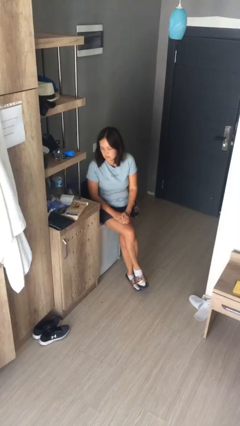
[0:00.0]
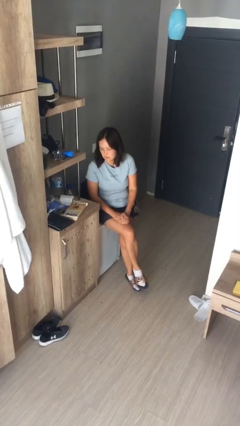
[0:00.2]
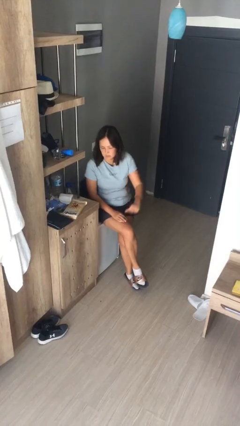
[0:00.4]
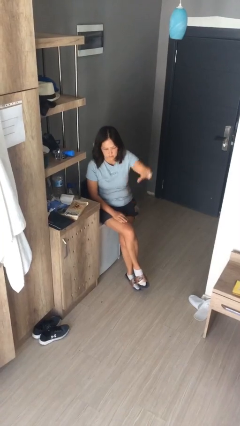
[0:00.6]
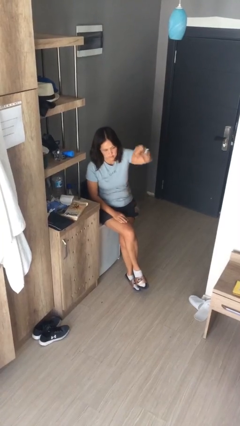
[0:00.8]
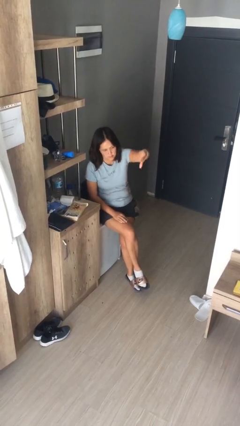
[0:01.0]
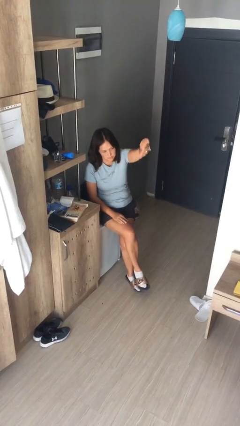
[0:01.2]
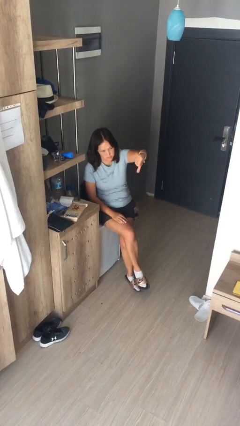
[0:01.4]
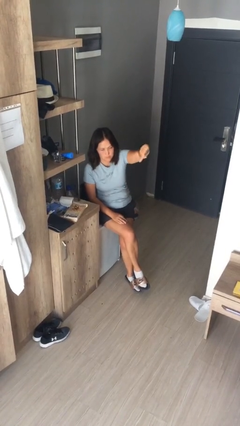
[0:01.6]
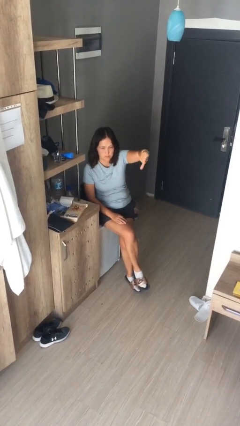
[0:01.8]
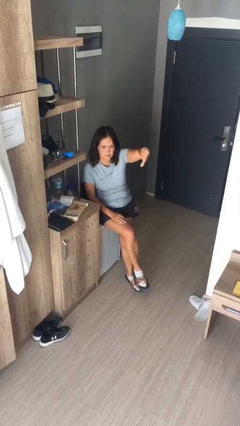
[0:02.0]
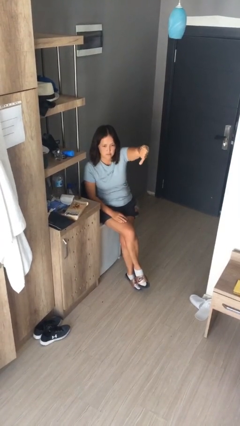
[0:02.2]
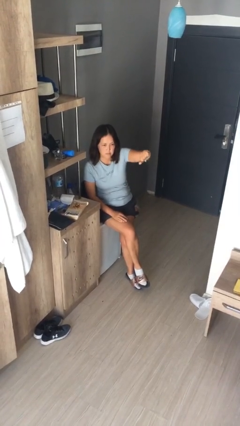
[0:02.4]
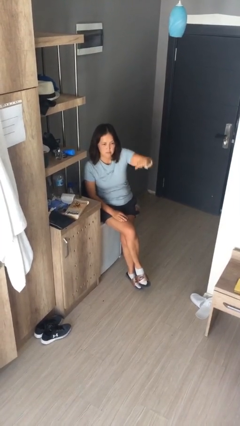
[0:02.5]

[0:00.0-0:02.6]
person gestures thumbs down

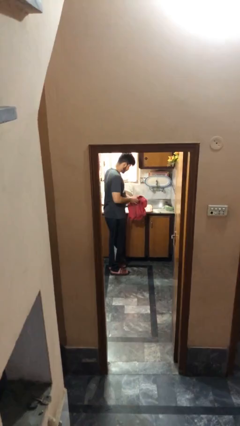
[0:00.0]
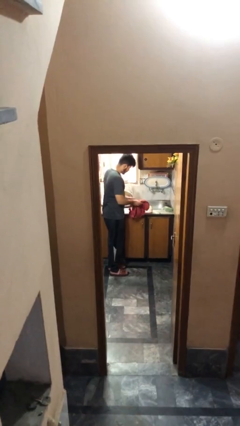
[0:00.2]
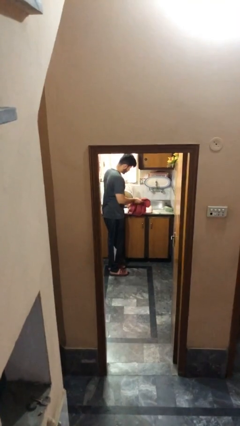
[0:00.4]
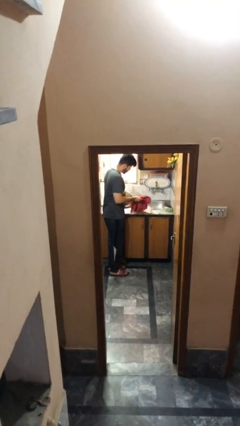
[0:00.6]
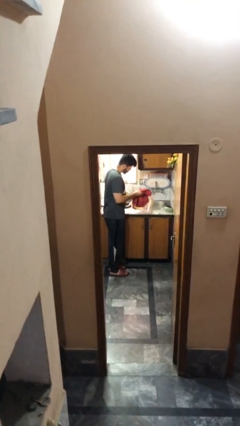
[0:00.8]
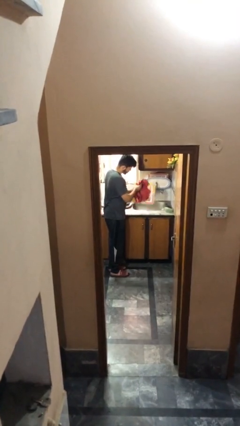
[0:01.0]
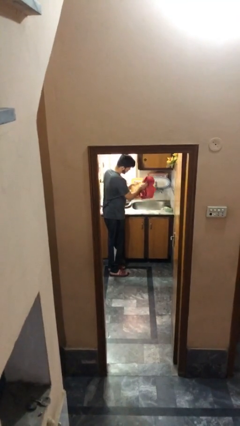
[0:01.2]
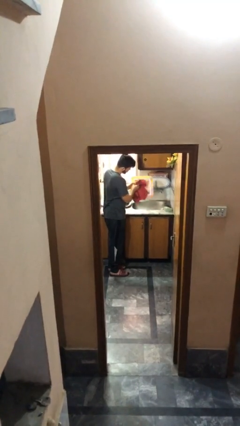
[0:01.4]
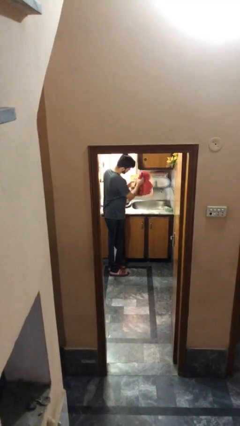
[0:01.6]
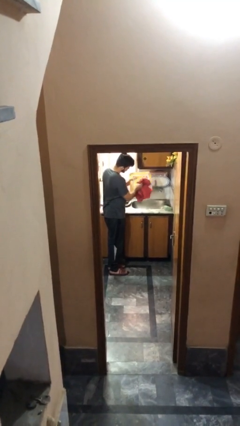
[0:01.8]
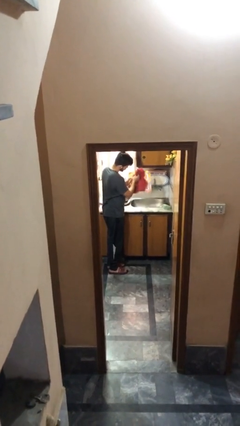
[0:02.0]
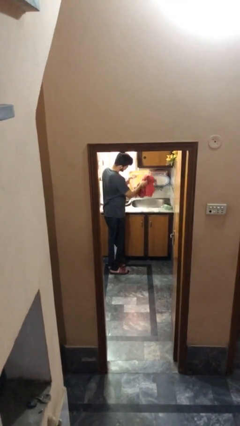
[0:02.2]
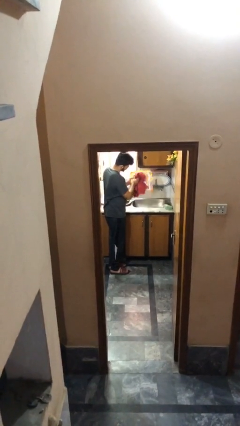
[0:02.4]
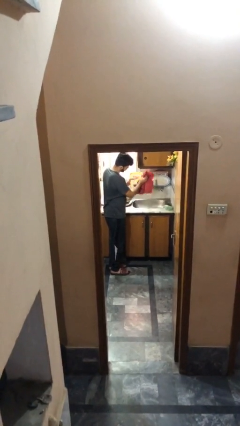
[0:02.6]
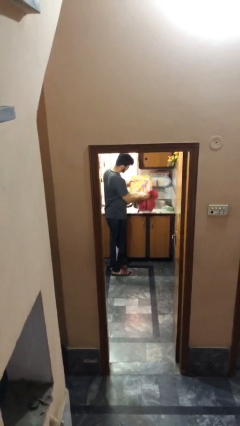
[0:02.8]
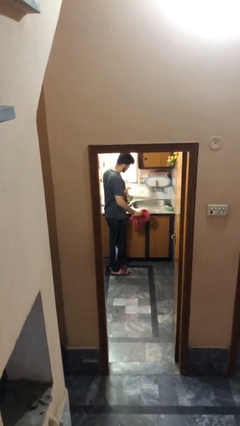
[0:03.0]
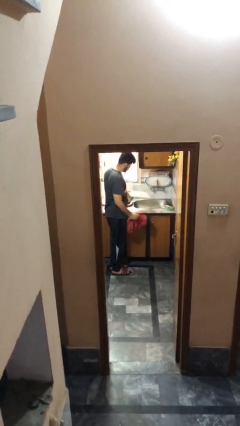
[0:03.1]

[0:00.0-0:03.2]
person dries dish

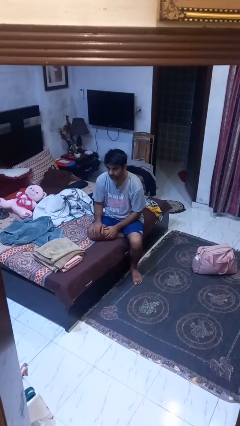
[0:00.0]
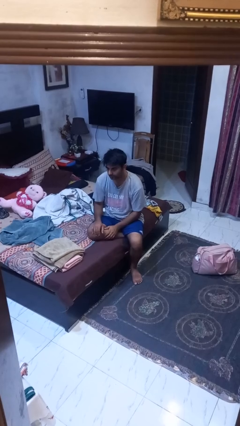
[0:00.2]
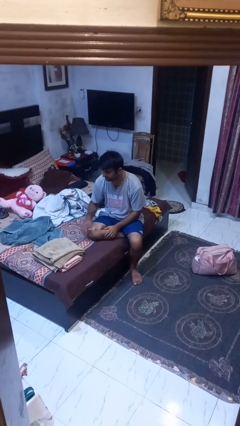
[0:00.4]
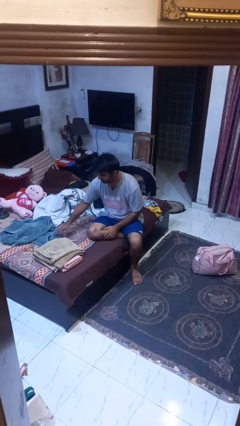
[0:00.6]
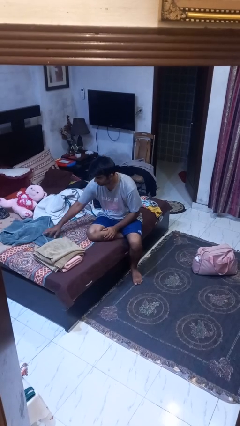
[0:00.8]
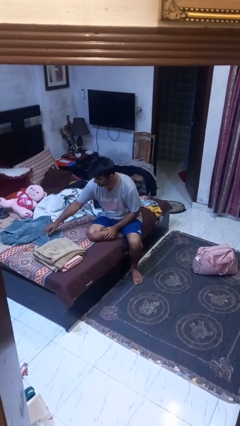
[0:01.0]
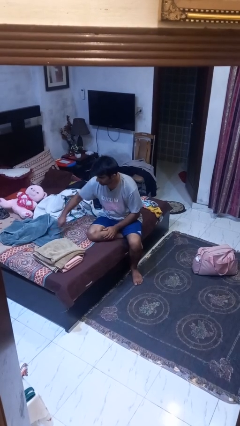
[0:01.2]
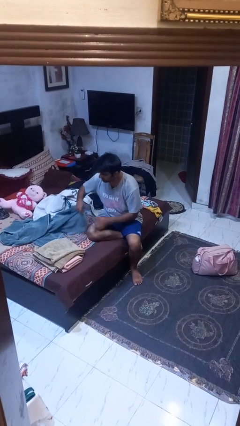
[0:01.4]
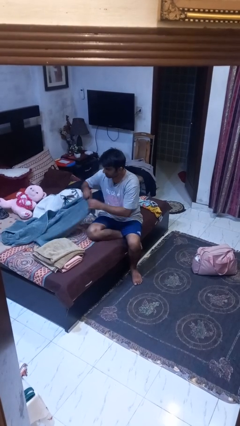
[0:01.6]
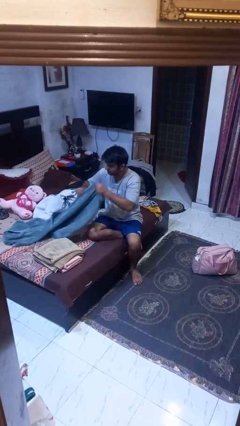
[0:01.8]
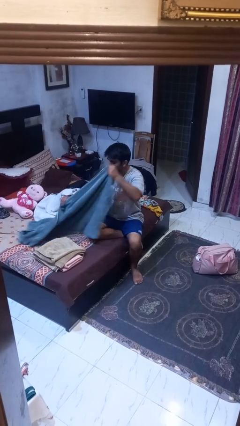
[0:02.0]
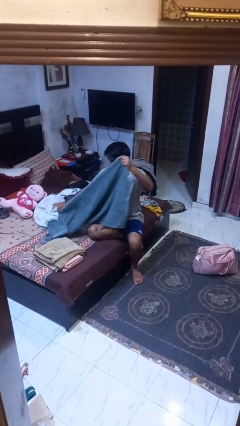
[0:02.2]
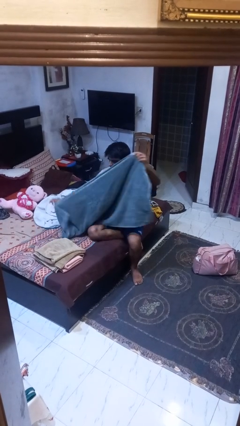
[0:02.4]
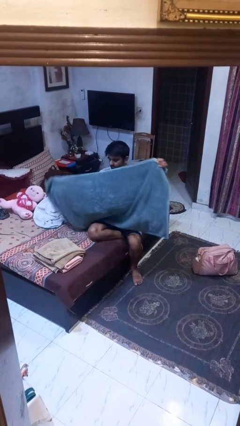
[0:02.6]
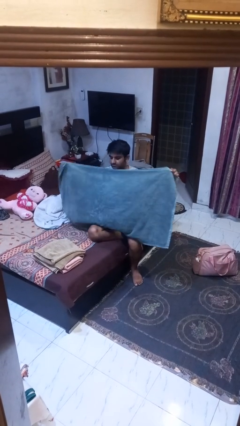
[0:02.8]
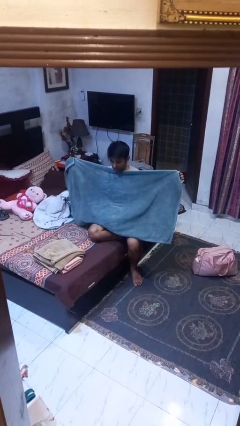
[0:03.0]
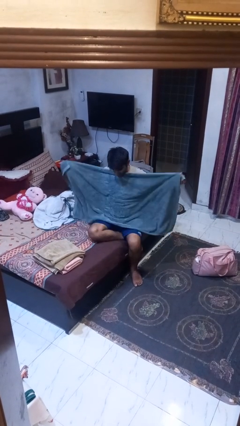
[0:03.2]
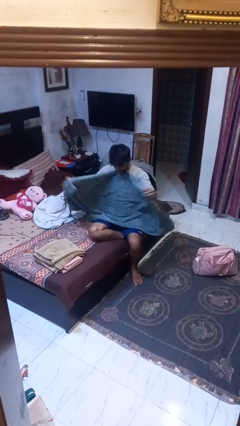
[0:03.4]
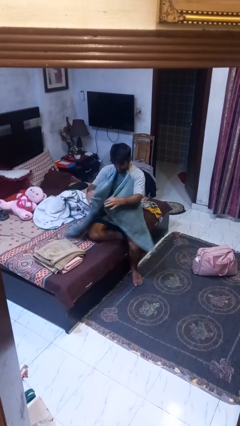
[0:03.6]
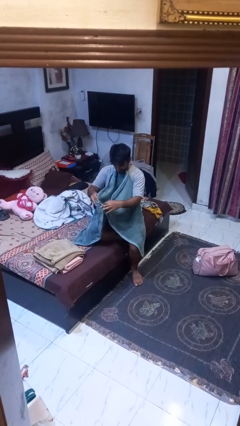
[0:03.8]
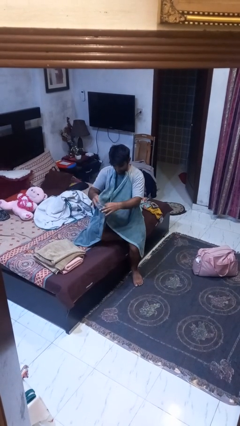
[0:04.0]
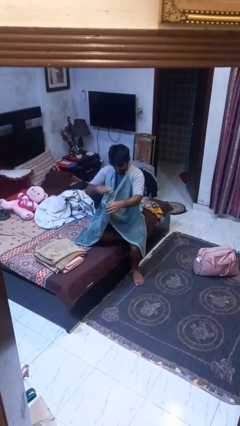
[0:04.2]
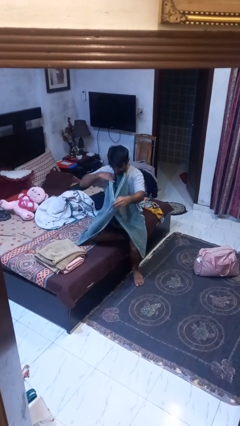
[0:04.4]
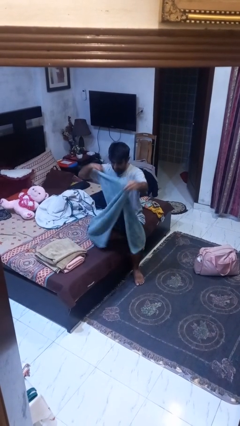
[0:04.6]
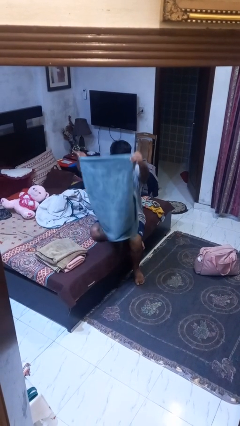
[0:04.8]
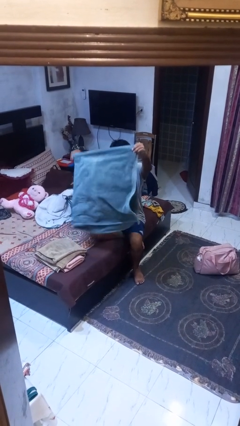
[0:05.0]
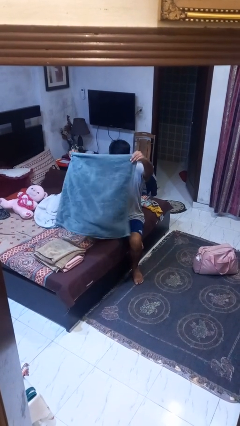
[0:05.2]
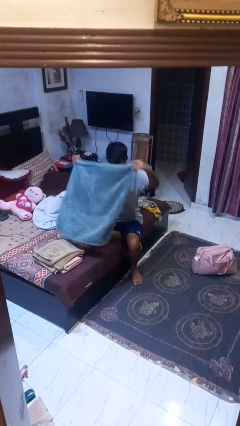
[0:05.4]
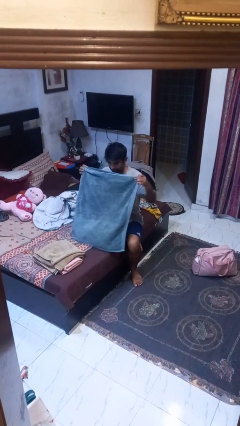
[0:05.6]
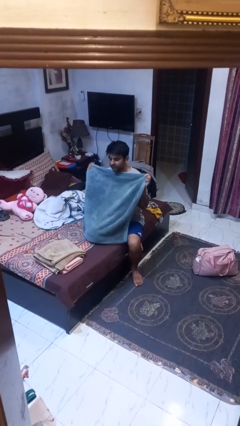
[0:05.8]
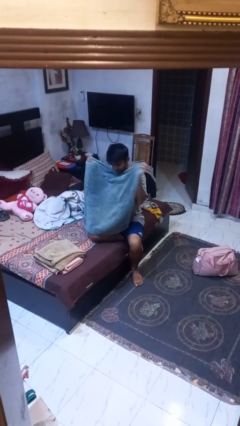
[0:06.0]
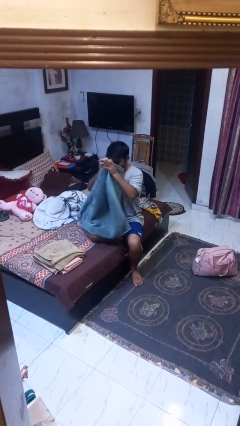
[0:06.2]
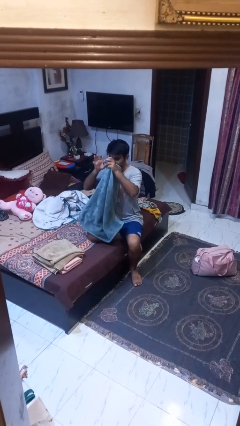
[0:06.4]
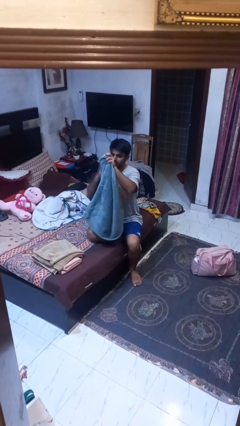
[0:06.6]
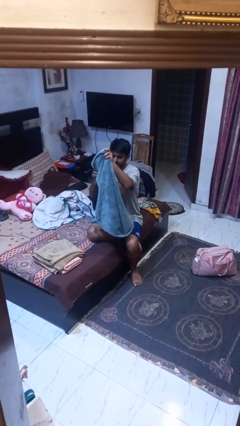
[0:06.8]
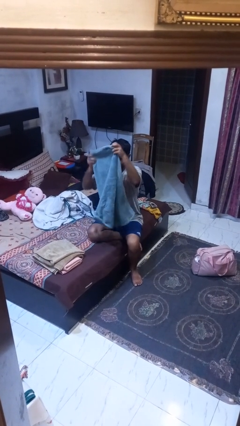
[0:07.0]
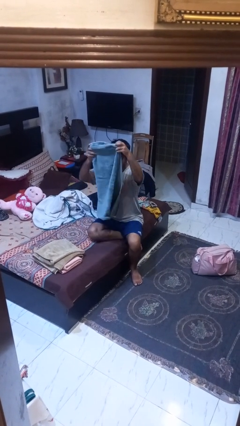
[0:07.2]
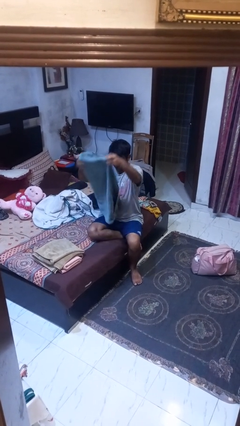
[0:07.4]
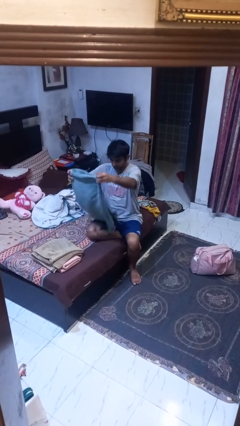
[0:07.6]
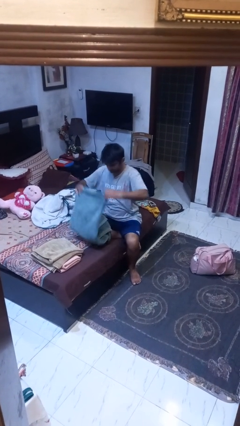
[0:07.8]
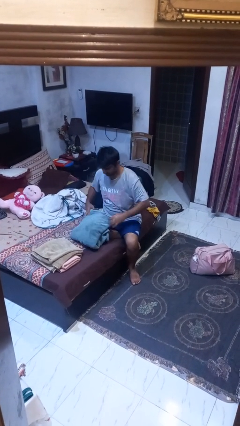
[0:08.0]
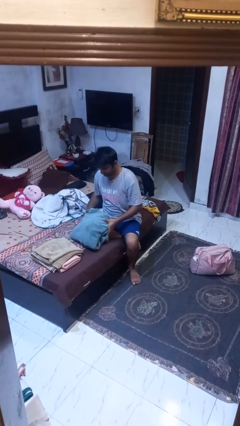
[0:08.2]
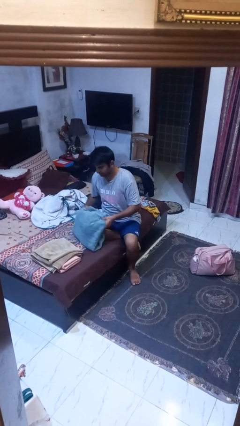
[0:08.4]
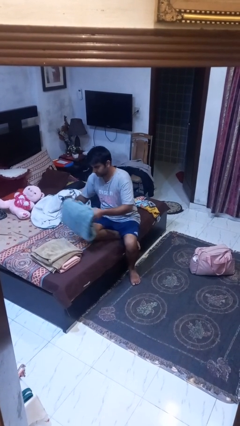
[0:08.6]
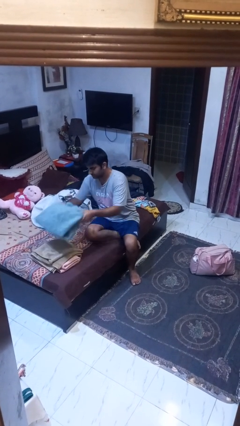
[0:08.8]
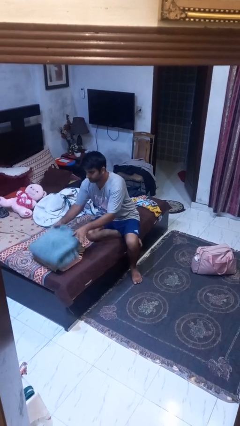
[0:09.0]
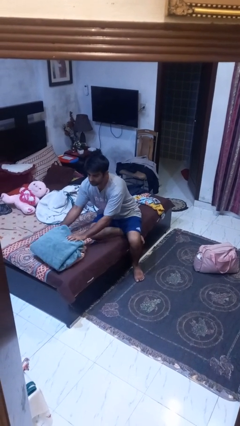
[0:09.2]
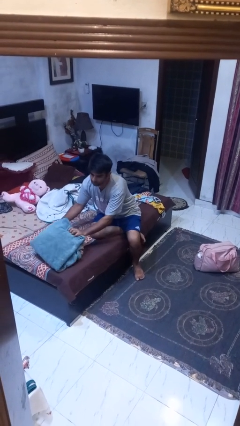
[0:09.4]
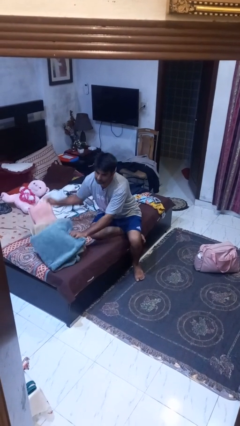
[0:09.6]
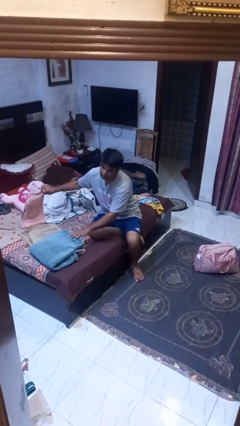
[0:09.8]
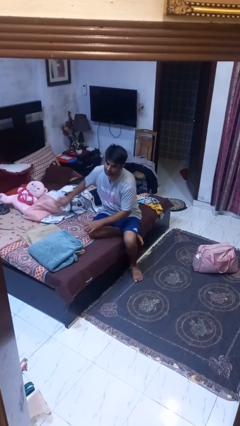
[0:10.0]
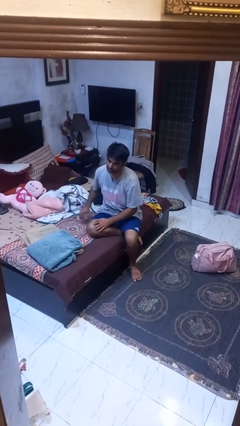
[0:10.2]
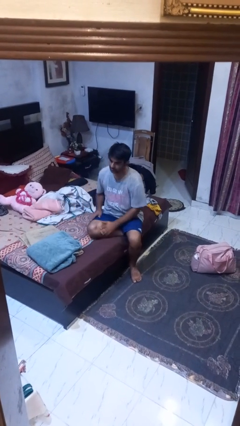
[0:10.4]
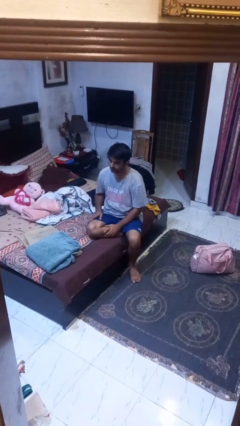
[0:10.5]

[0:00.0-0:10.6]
person folds towel

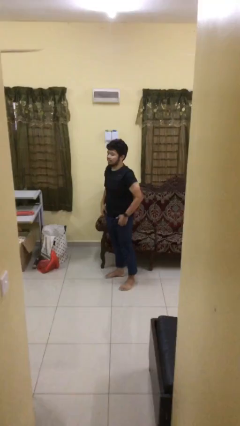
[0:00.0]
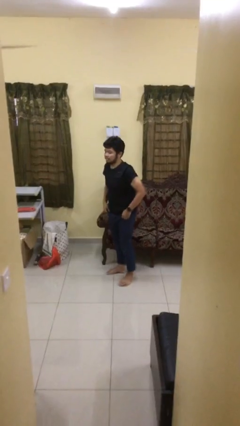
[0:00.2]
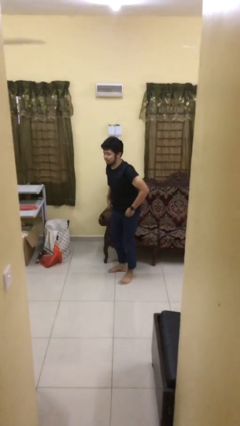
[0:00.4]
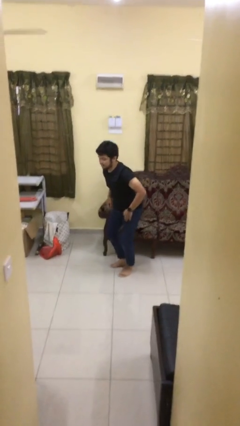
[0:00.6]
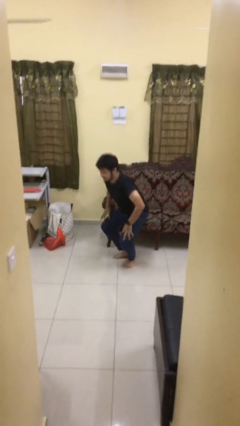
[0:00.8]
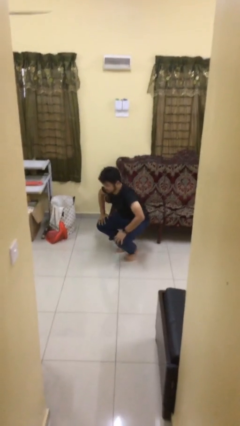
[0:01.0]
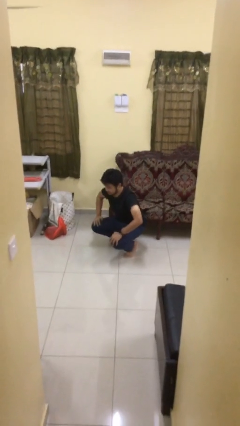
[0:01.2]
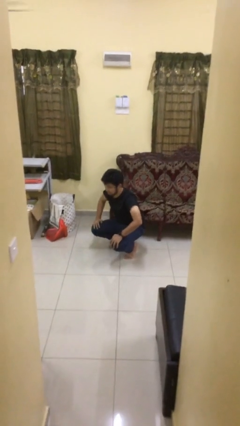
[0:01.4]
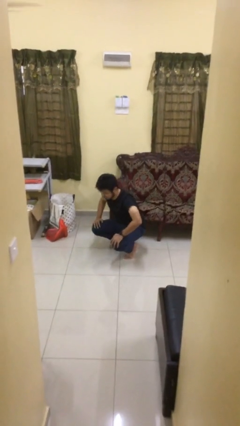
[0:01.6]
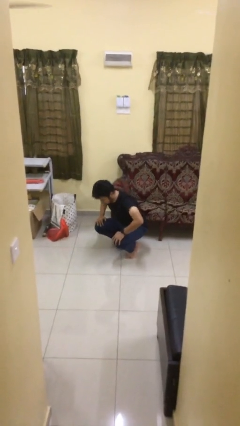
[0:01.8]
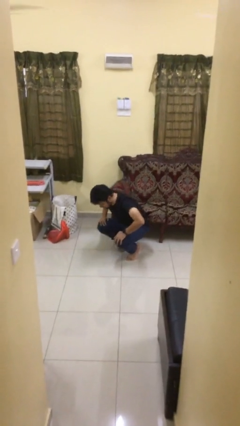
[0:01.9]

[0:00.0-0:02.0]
person squats
